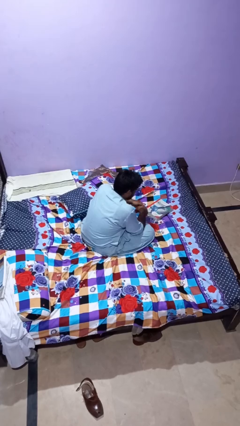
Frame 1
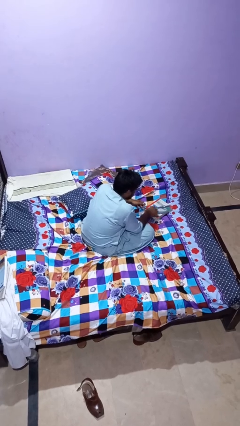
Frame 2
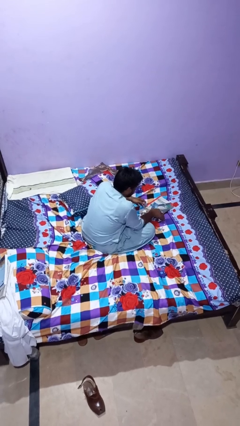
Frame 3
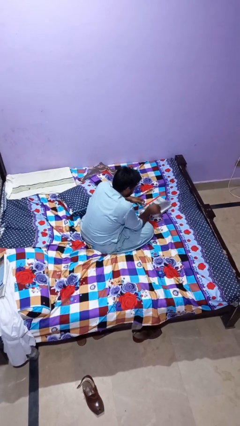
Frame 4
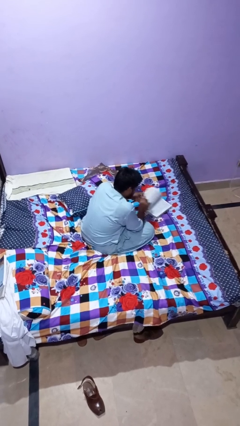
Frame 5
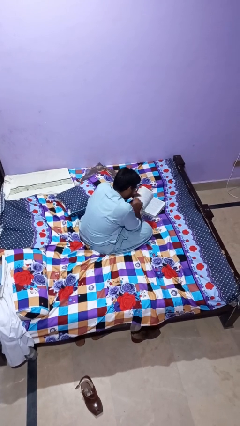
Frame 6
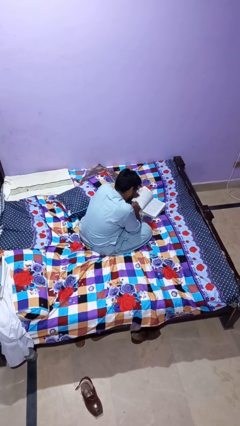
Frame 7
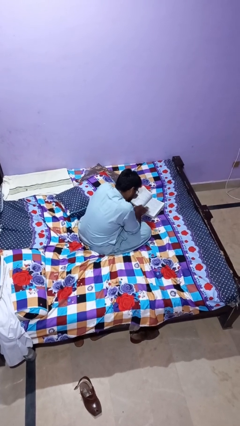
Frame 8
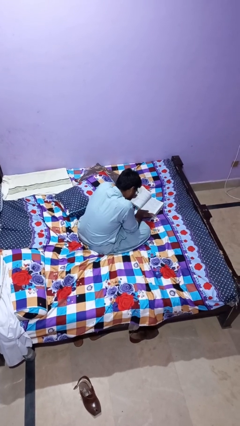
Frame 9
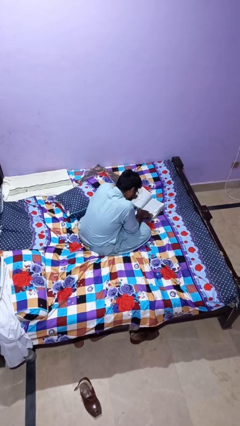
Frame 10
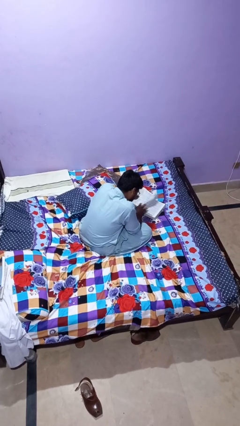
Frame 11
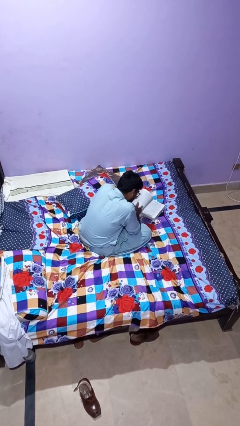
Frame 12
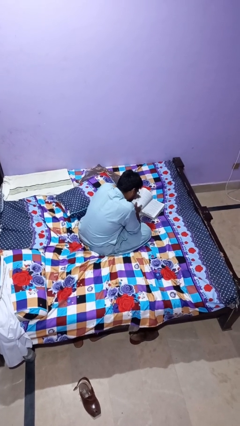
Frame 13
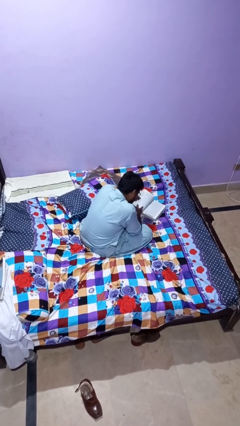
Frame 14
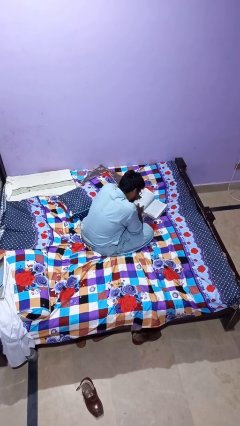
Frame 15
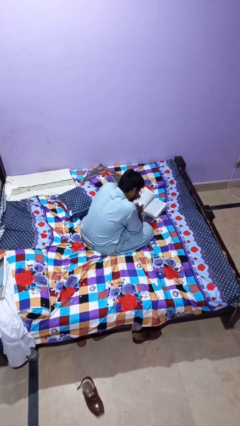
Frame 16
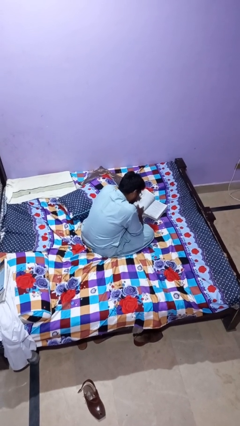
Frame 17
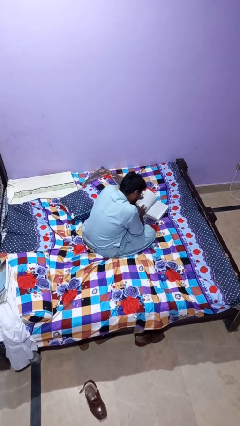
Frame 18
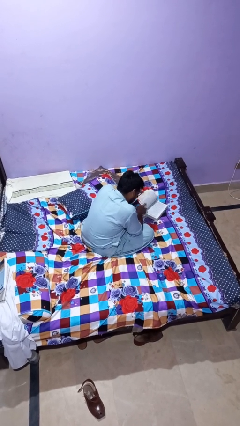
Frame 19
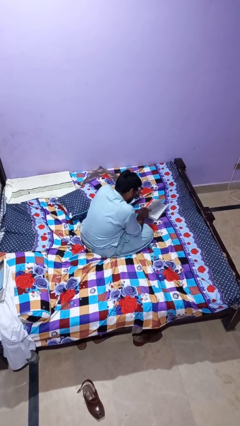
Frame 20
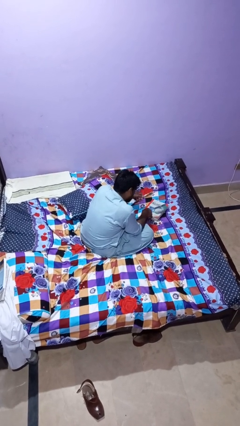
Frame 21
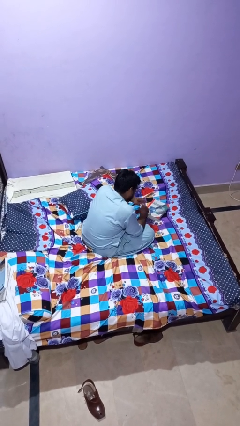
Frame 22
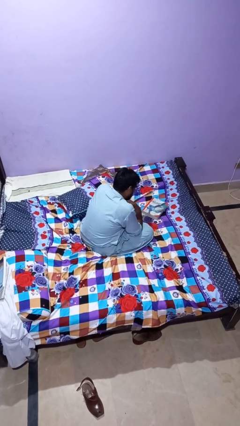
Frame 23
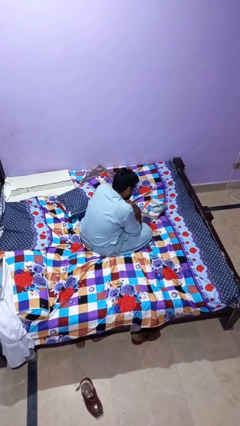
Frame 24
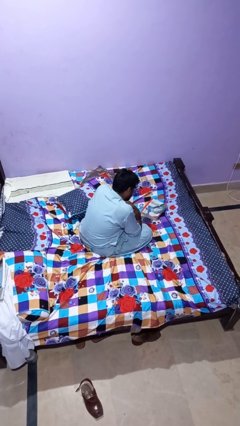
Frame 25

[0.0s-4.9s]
person reads book

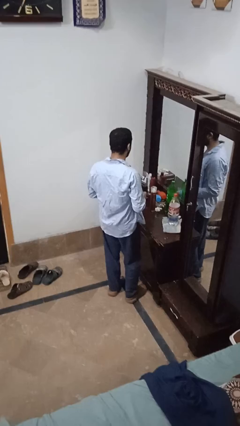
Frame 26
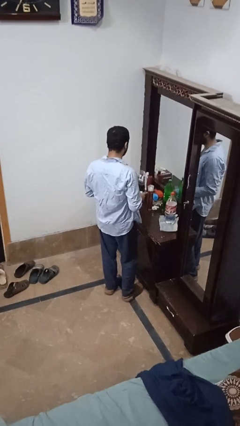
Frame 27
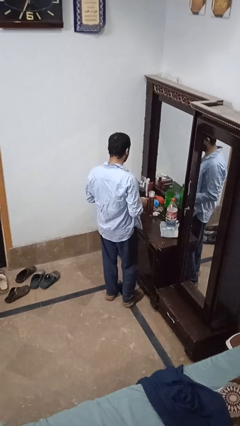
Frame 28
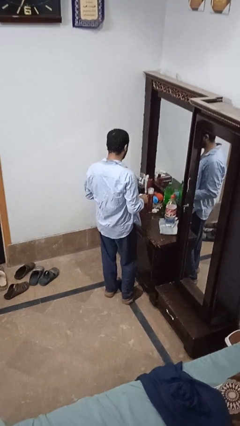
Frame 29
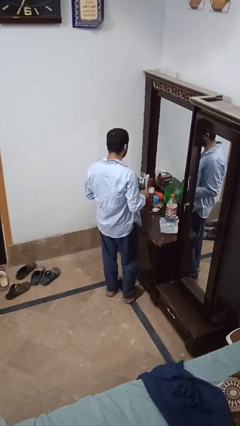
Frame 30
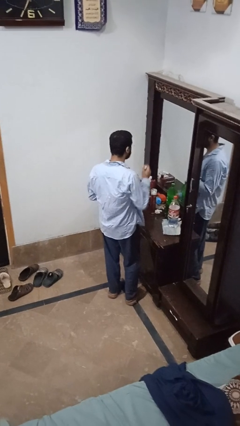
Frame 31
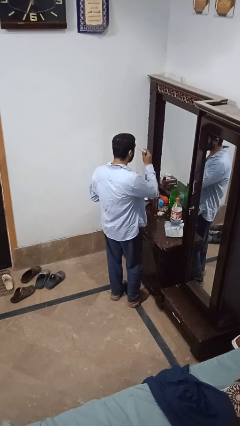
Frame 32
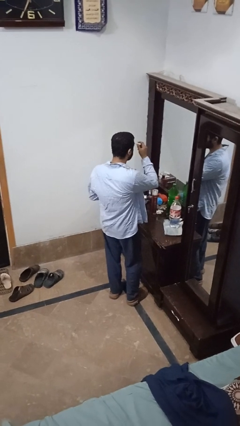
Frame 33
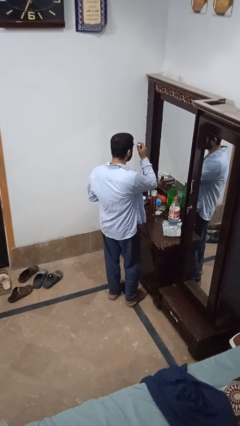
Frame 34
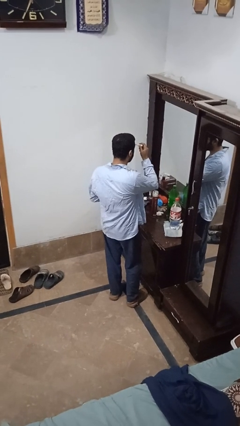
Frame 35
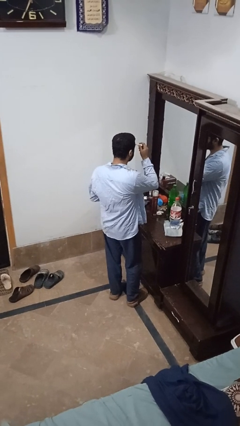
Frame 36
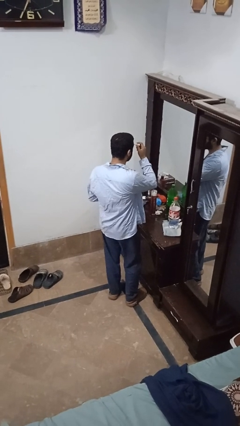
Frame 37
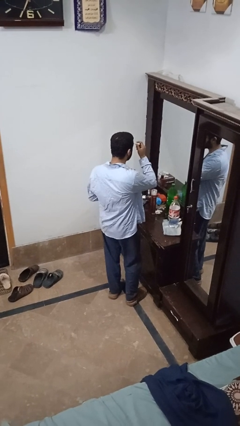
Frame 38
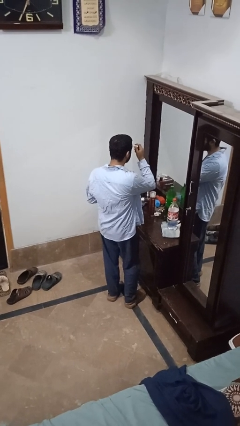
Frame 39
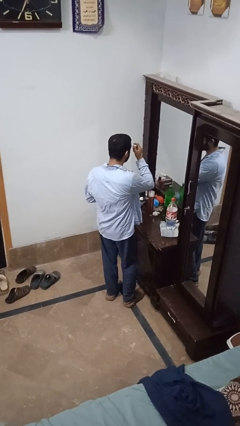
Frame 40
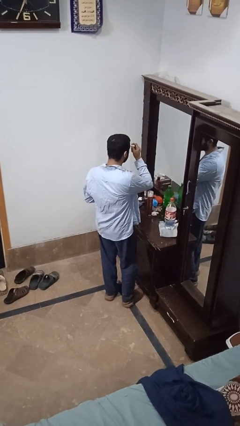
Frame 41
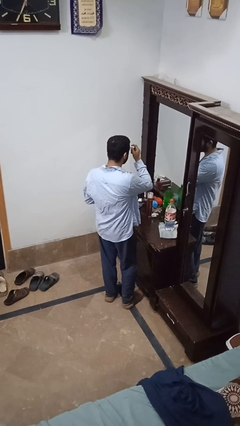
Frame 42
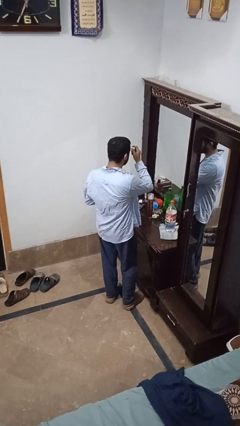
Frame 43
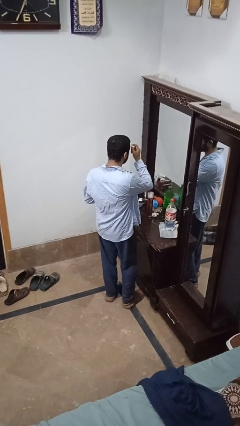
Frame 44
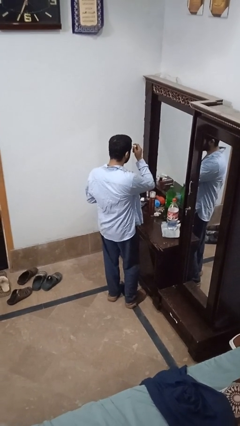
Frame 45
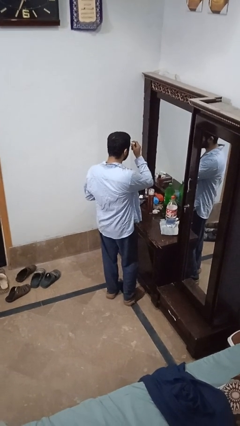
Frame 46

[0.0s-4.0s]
person applies eye makeup

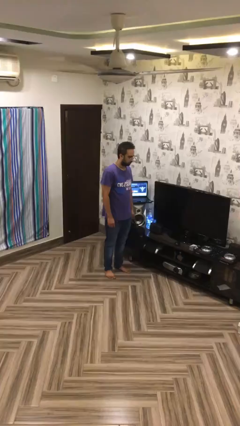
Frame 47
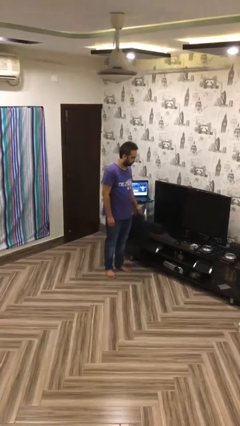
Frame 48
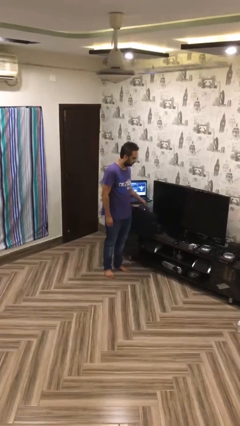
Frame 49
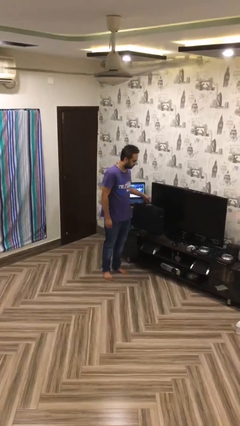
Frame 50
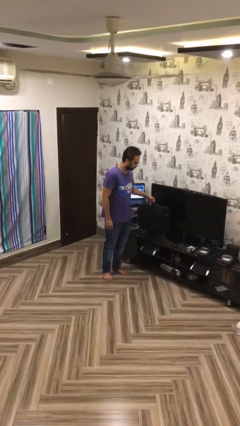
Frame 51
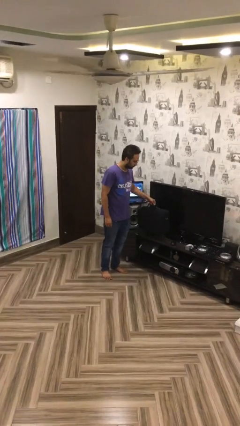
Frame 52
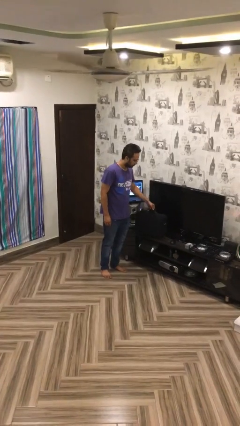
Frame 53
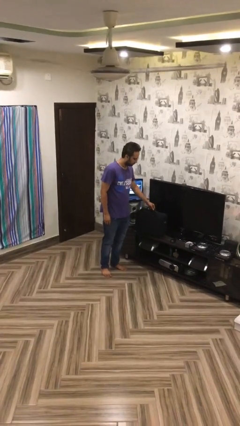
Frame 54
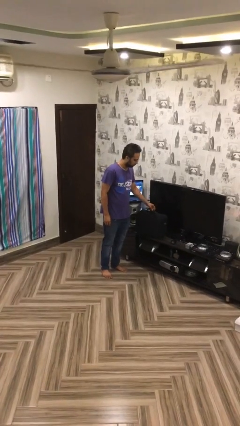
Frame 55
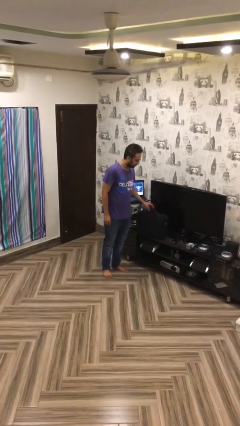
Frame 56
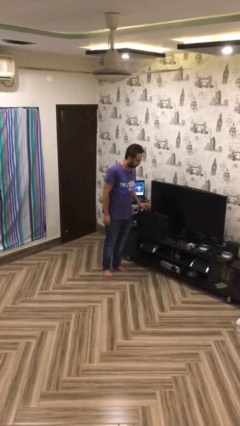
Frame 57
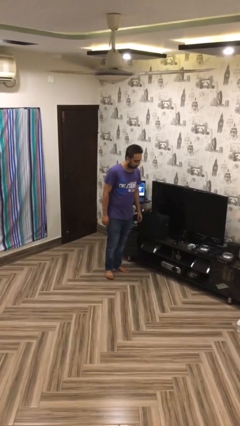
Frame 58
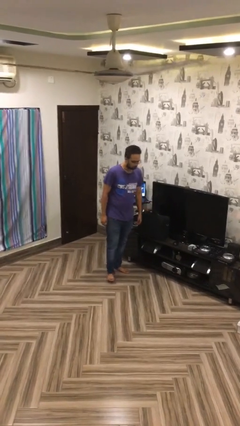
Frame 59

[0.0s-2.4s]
person puts down object on table

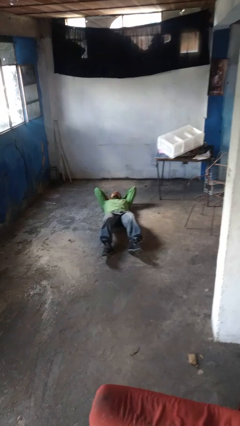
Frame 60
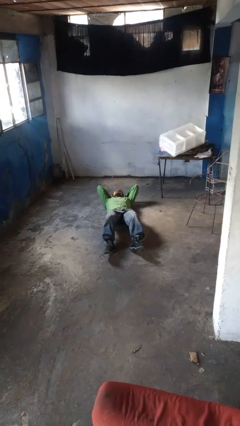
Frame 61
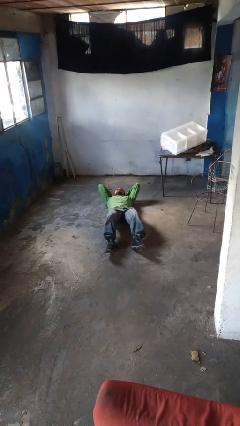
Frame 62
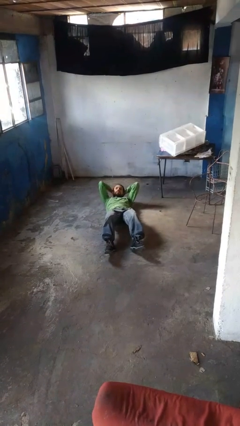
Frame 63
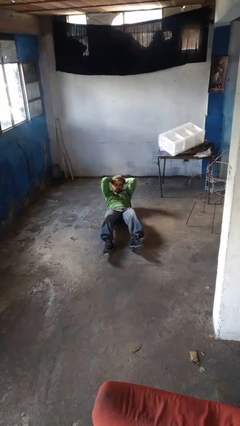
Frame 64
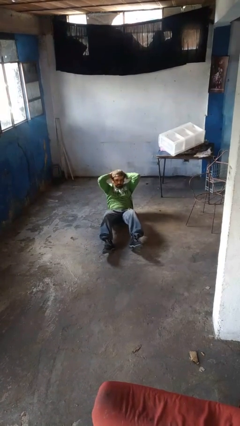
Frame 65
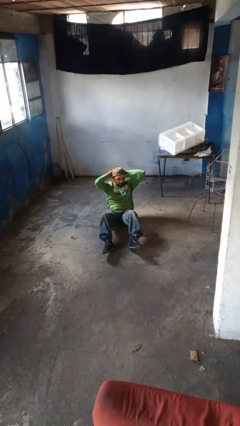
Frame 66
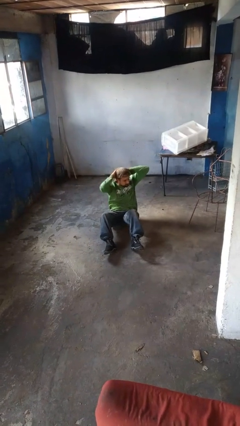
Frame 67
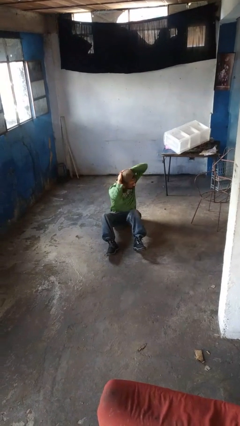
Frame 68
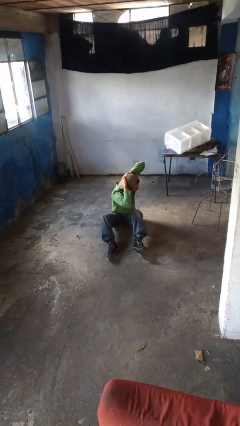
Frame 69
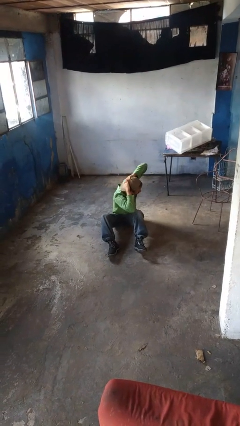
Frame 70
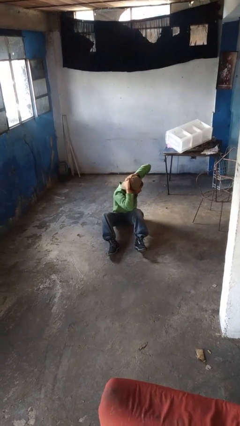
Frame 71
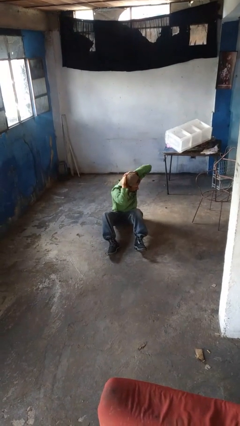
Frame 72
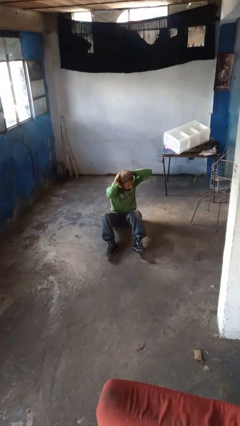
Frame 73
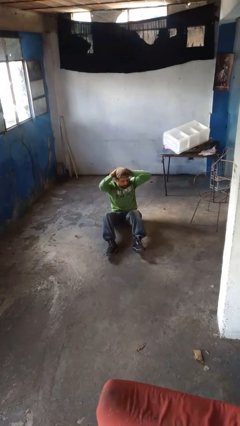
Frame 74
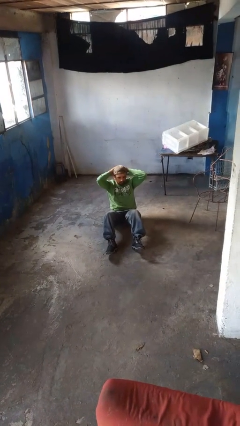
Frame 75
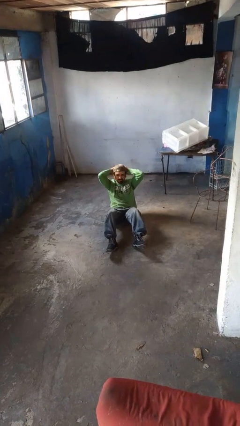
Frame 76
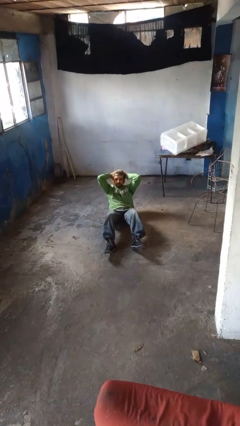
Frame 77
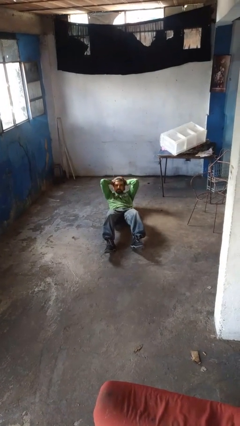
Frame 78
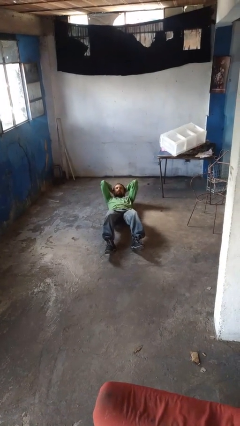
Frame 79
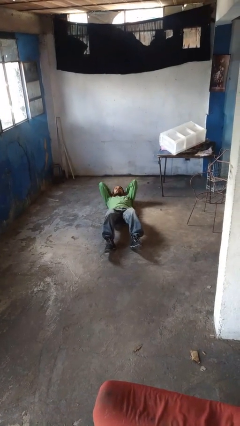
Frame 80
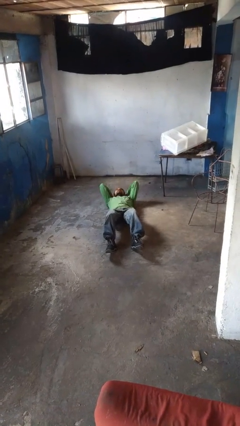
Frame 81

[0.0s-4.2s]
person exercises with situp

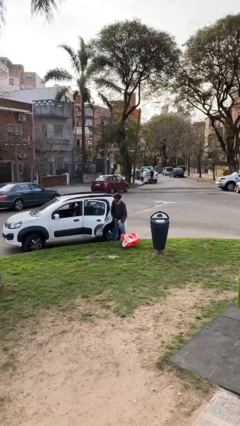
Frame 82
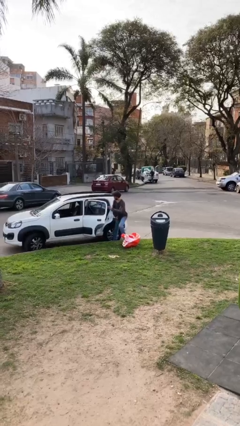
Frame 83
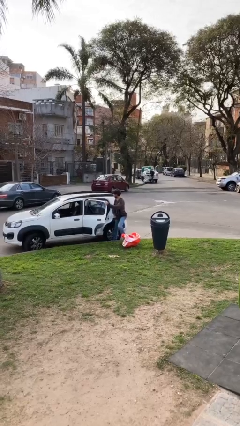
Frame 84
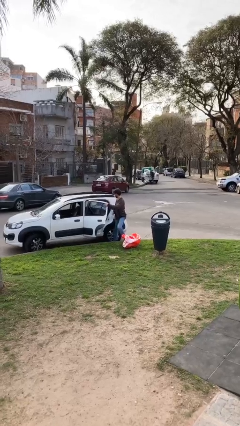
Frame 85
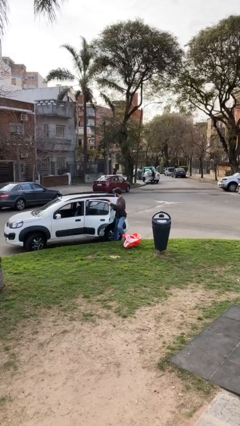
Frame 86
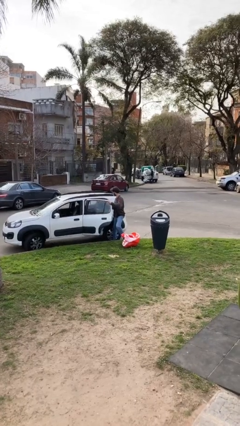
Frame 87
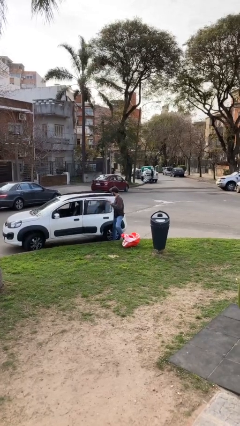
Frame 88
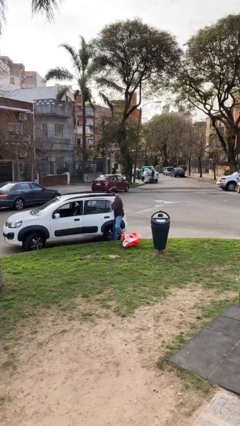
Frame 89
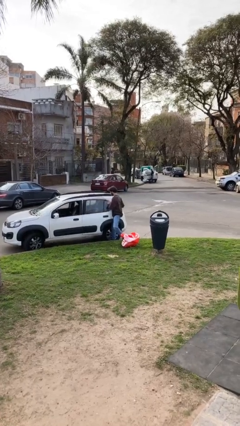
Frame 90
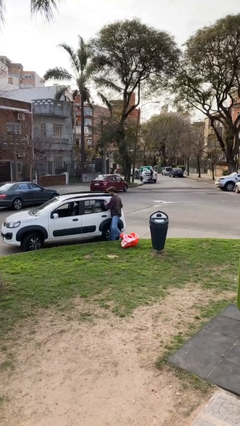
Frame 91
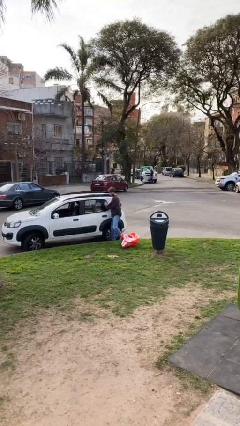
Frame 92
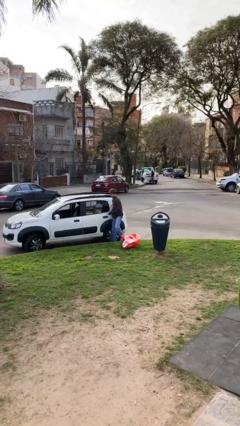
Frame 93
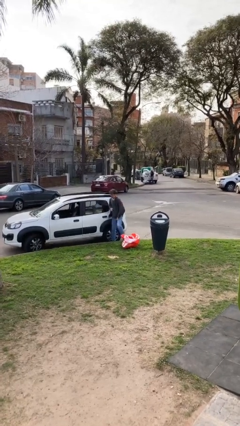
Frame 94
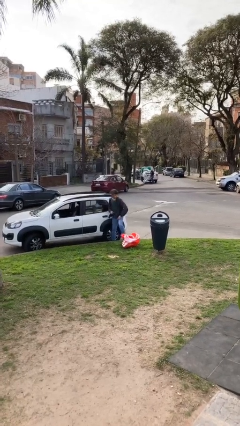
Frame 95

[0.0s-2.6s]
person closes car door
